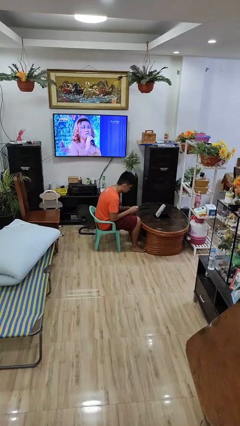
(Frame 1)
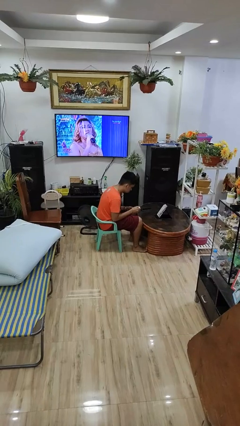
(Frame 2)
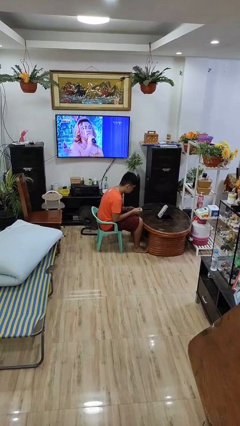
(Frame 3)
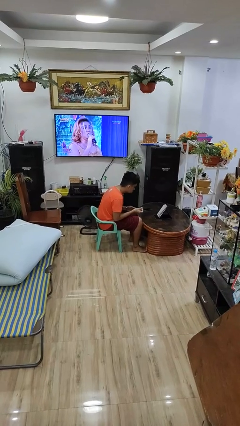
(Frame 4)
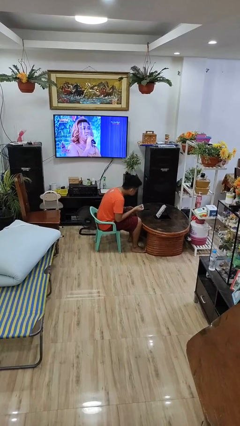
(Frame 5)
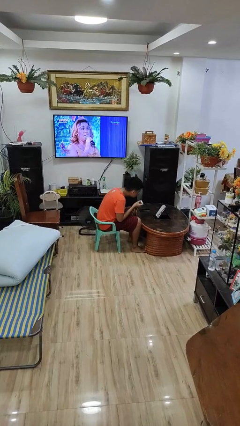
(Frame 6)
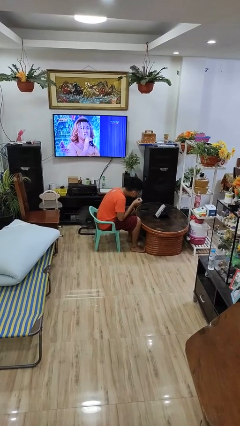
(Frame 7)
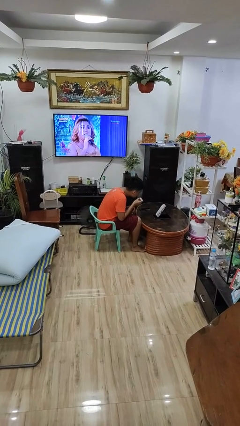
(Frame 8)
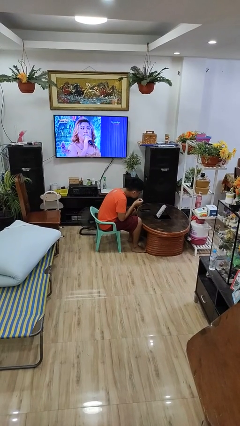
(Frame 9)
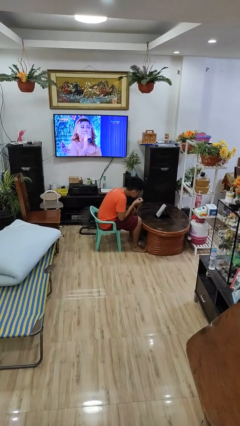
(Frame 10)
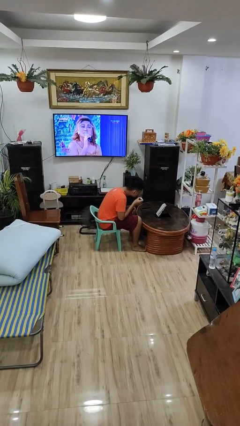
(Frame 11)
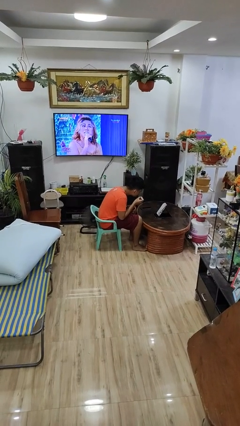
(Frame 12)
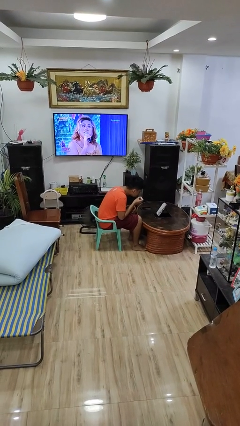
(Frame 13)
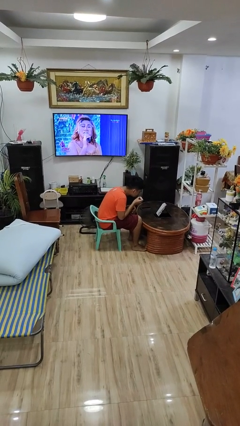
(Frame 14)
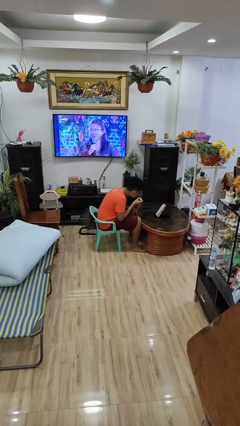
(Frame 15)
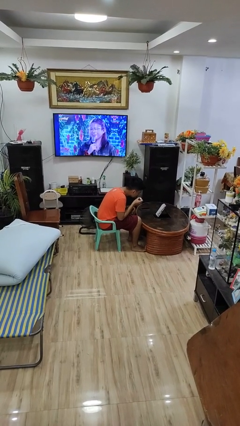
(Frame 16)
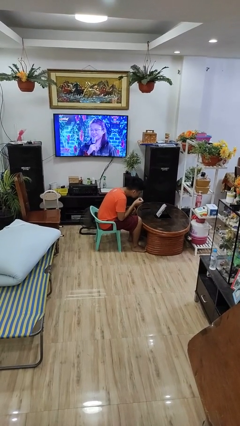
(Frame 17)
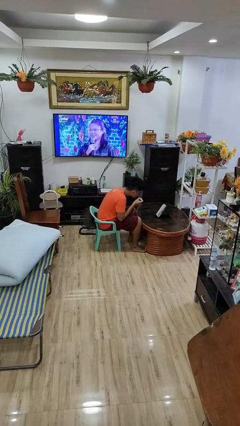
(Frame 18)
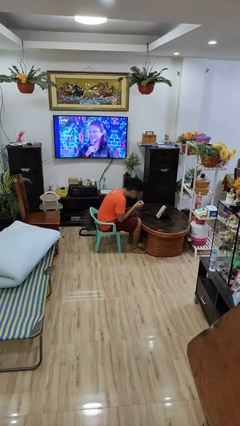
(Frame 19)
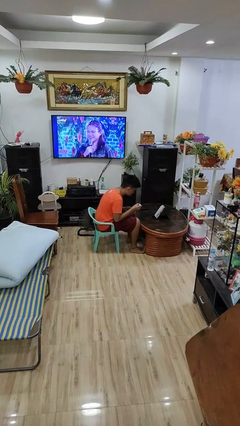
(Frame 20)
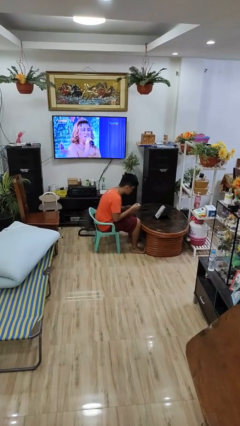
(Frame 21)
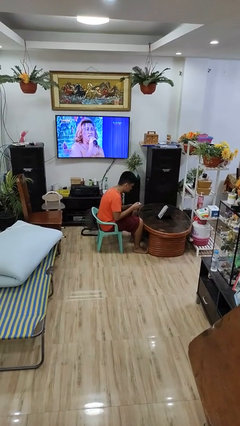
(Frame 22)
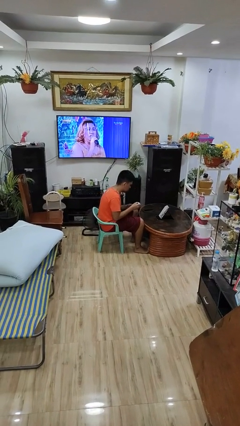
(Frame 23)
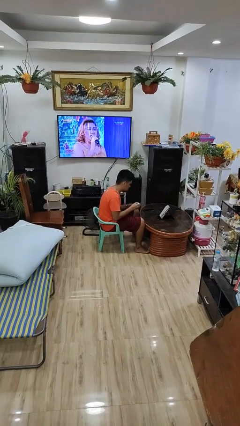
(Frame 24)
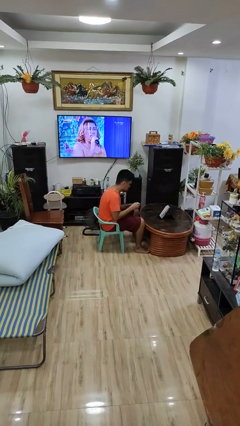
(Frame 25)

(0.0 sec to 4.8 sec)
person applies lip makeup

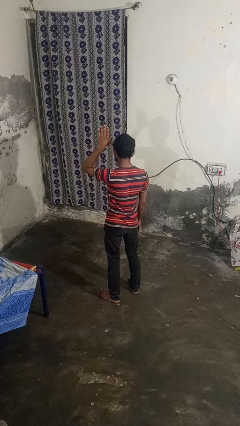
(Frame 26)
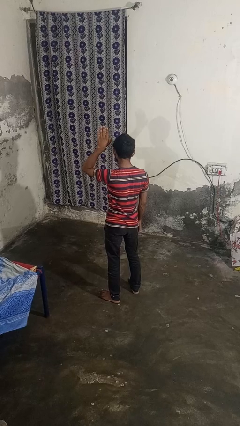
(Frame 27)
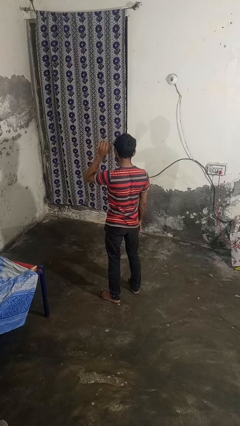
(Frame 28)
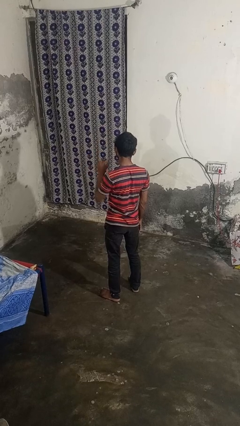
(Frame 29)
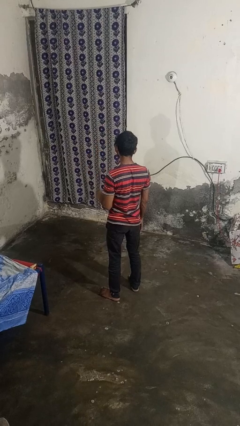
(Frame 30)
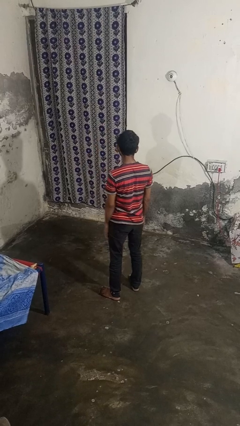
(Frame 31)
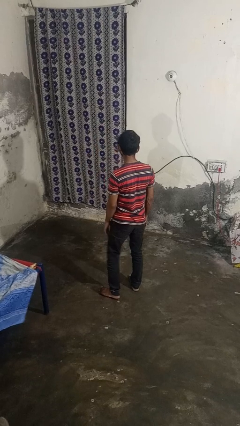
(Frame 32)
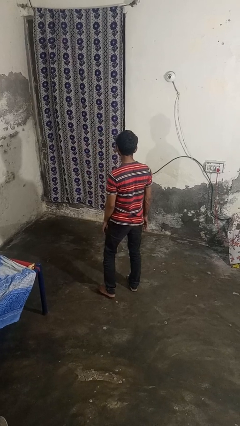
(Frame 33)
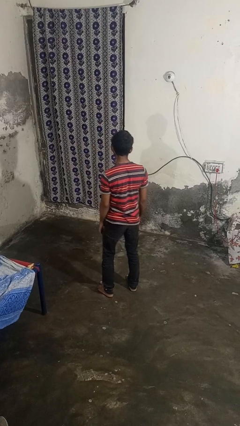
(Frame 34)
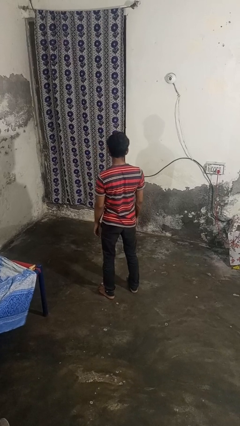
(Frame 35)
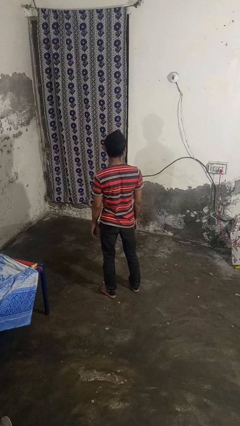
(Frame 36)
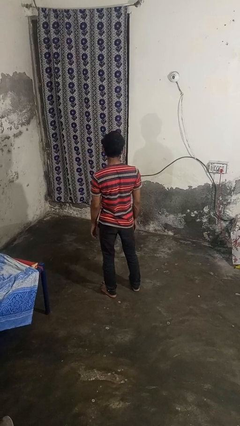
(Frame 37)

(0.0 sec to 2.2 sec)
person gestures lower hand

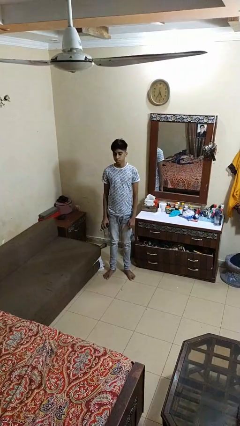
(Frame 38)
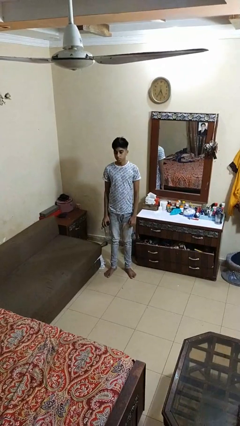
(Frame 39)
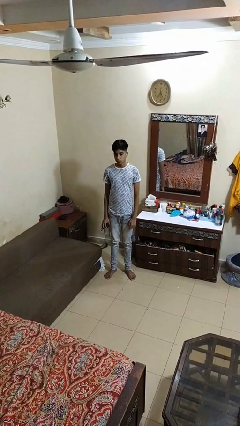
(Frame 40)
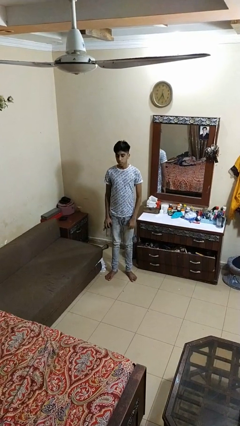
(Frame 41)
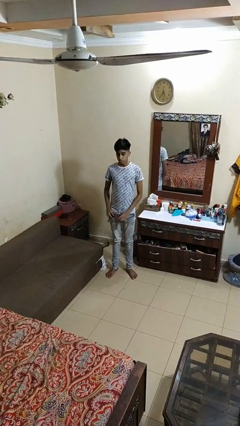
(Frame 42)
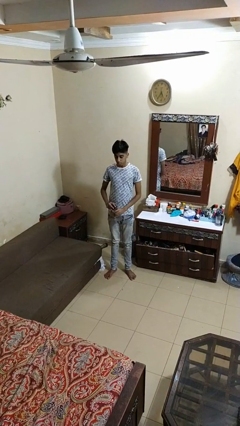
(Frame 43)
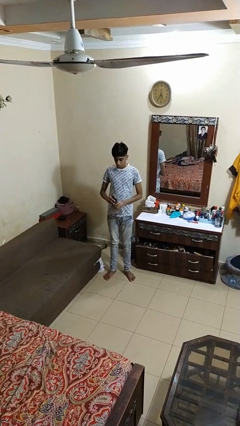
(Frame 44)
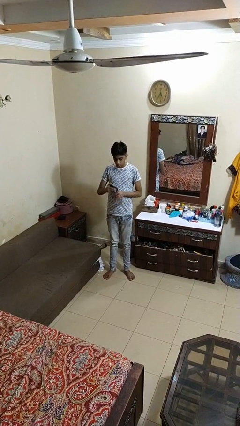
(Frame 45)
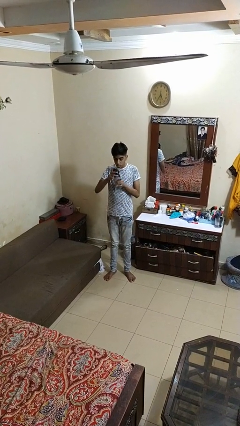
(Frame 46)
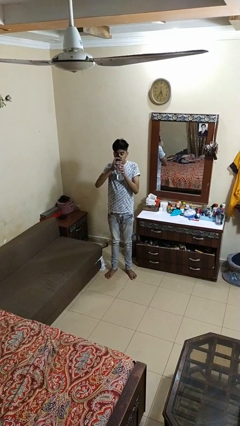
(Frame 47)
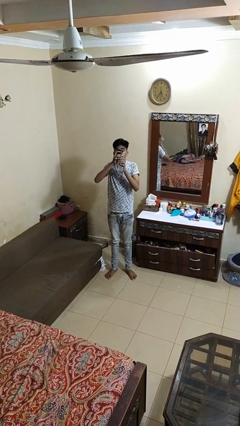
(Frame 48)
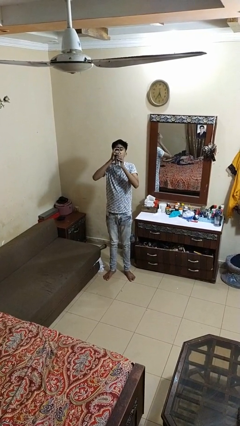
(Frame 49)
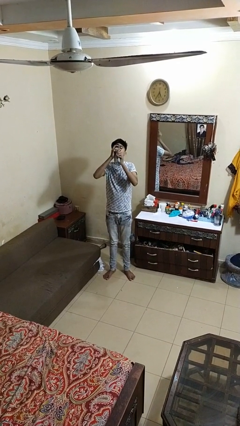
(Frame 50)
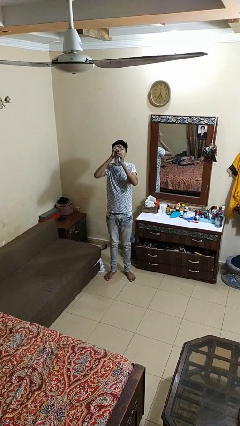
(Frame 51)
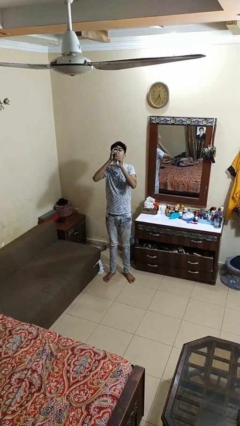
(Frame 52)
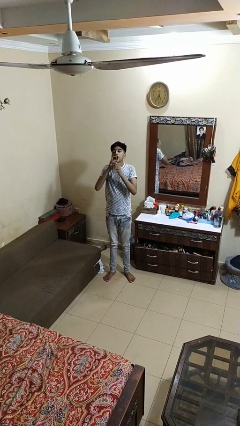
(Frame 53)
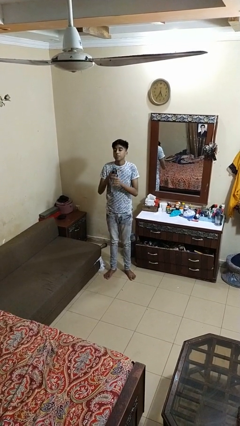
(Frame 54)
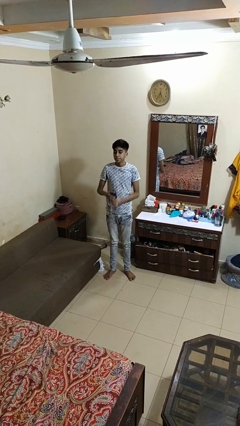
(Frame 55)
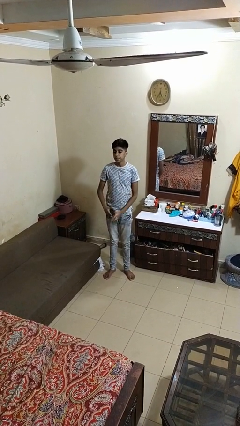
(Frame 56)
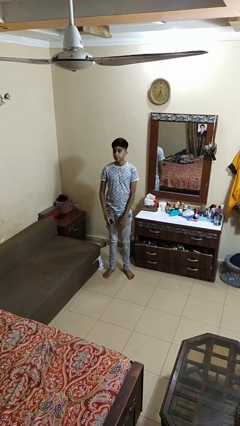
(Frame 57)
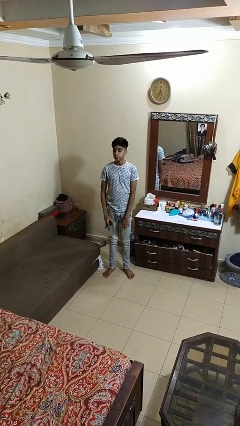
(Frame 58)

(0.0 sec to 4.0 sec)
person drinks from bottle

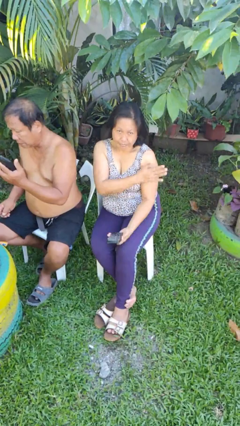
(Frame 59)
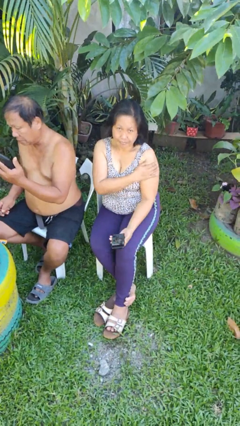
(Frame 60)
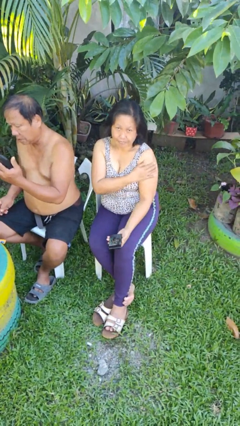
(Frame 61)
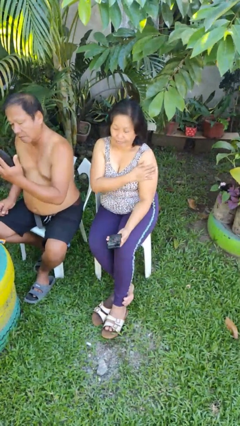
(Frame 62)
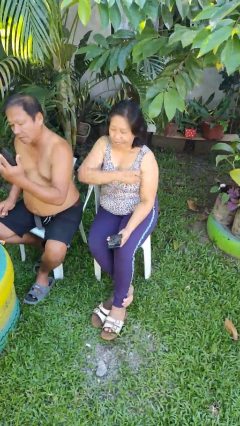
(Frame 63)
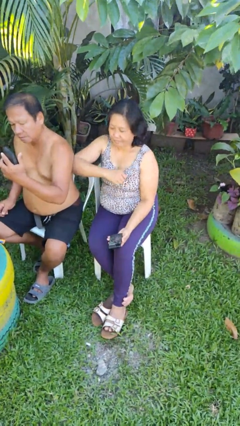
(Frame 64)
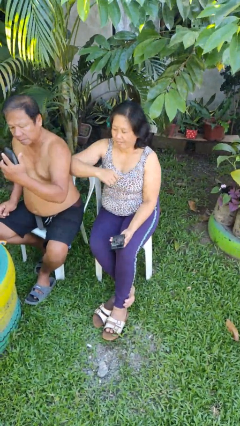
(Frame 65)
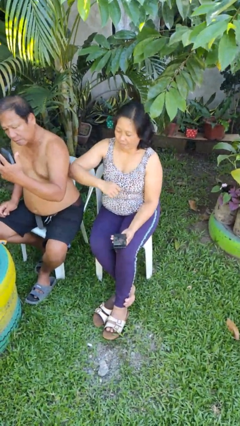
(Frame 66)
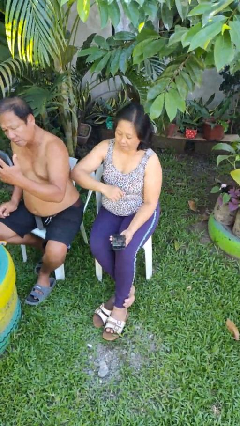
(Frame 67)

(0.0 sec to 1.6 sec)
person nudges person with elbow

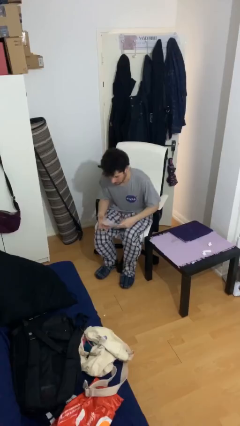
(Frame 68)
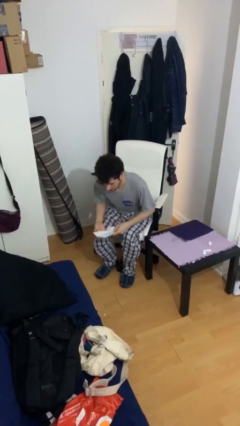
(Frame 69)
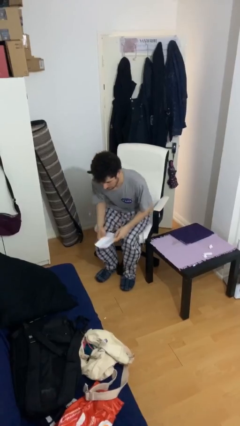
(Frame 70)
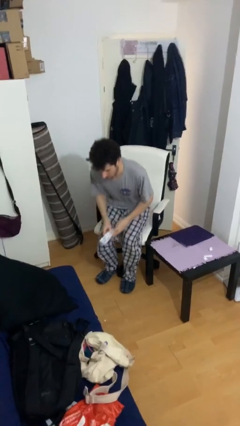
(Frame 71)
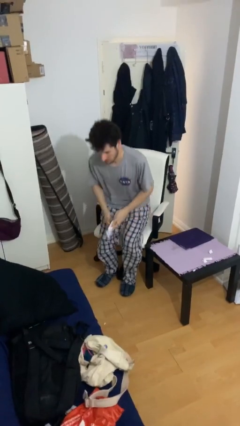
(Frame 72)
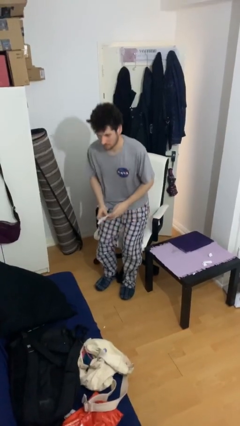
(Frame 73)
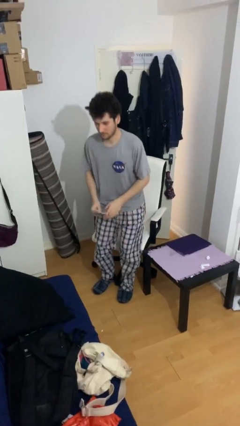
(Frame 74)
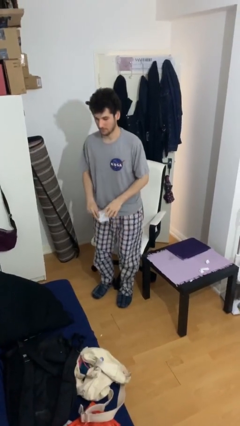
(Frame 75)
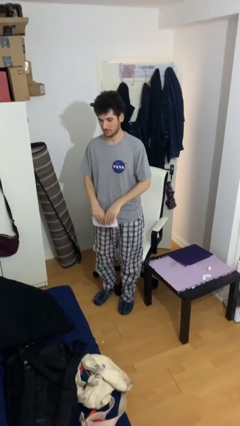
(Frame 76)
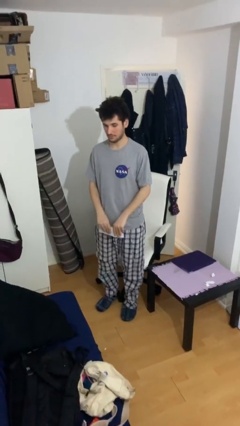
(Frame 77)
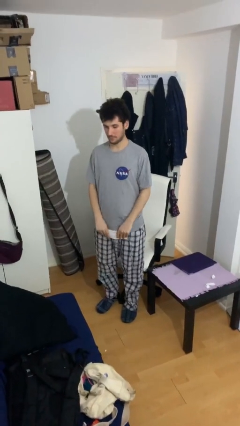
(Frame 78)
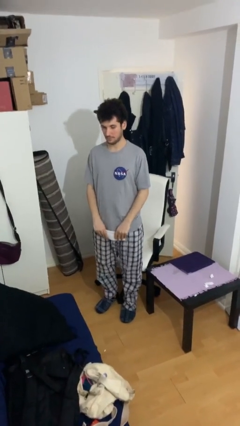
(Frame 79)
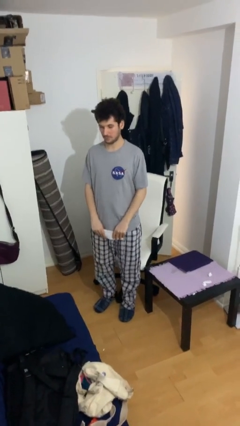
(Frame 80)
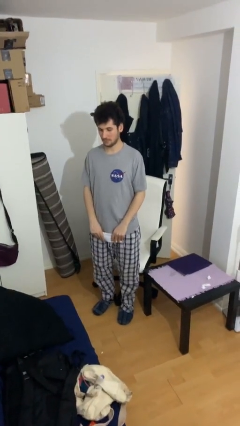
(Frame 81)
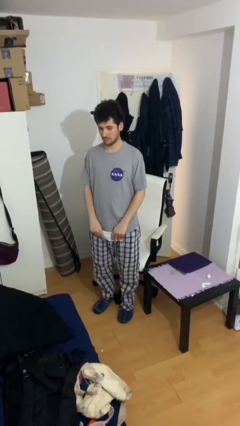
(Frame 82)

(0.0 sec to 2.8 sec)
person stands up

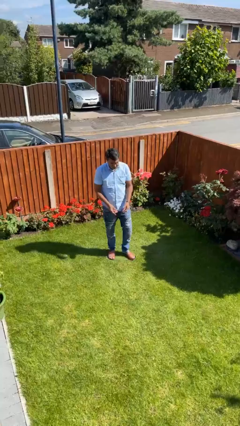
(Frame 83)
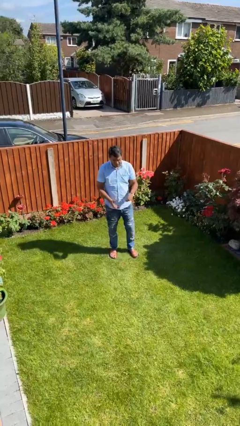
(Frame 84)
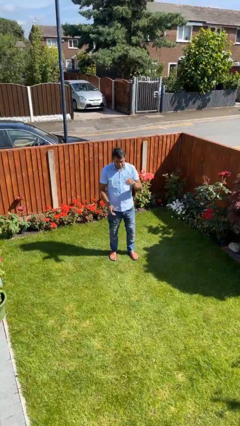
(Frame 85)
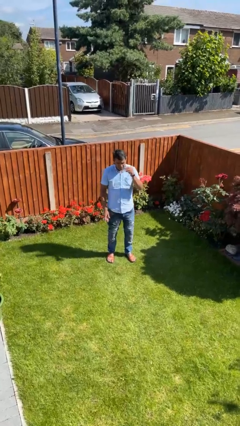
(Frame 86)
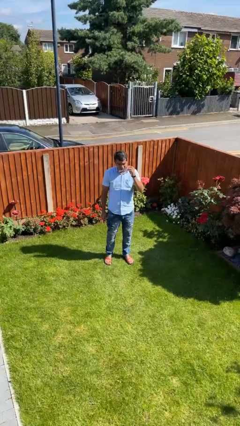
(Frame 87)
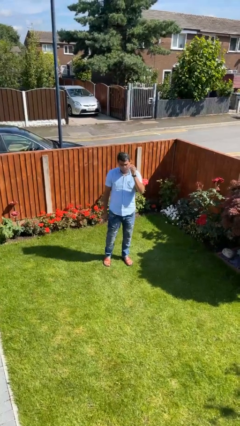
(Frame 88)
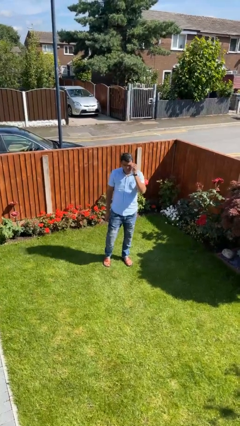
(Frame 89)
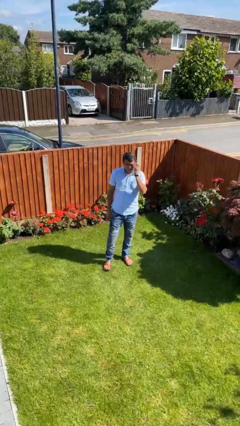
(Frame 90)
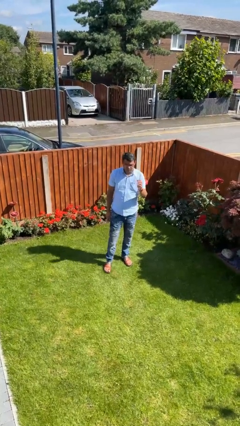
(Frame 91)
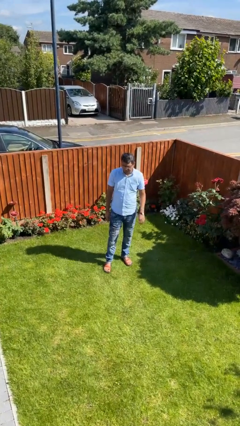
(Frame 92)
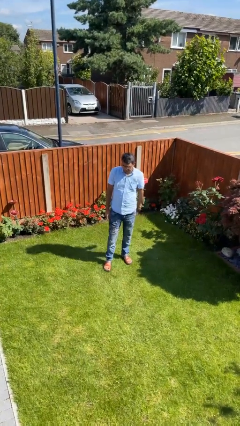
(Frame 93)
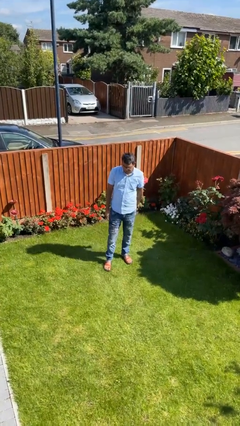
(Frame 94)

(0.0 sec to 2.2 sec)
person puts on glasses
